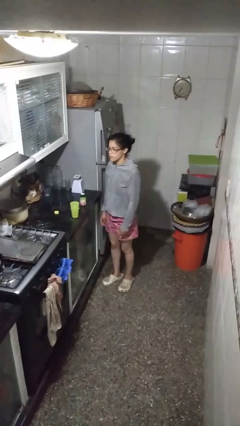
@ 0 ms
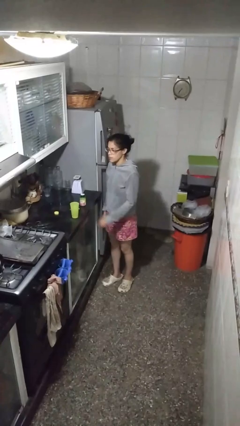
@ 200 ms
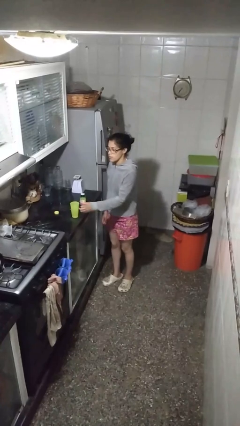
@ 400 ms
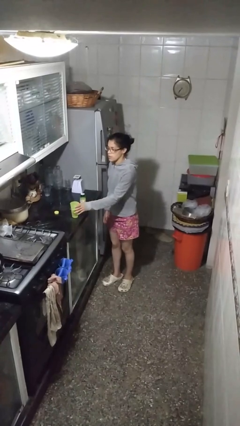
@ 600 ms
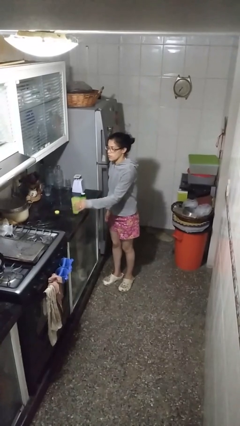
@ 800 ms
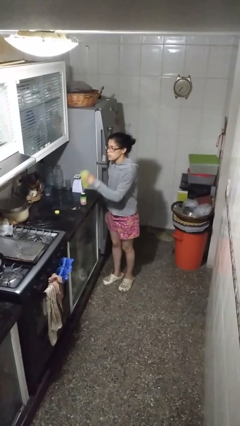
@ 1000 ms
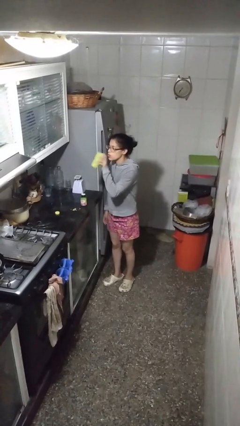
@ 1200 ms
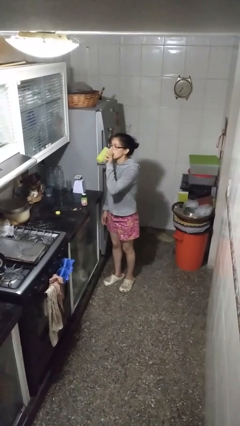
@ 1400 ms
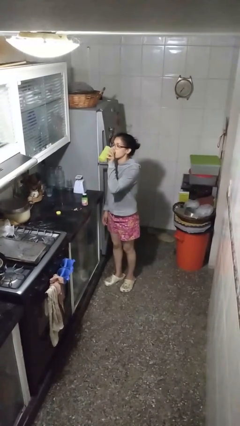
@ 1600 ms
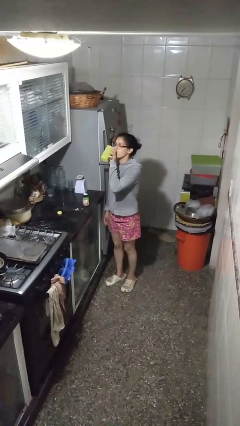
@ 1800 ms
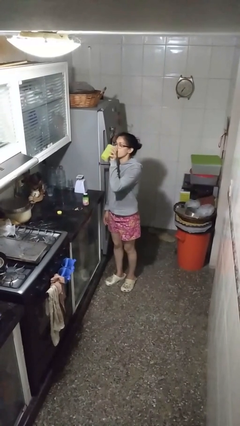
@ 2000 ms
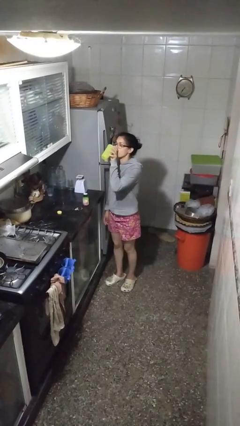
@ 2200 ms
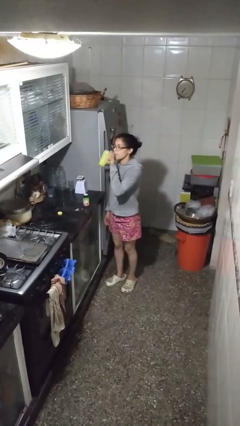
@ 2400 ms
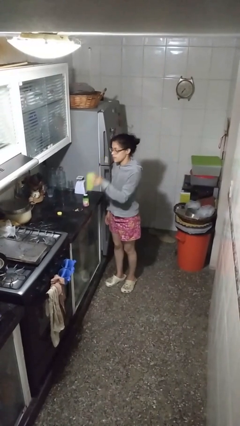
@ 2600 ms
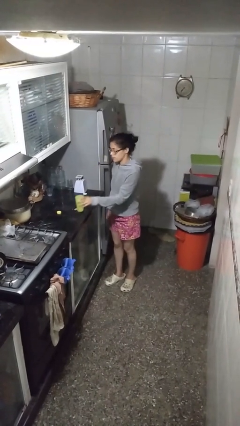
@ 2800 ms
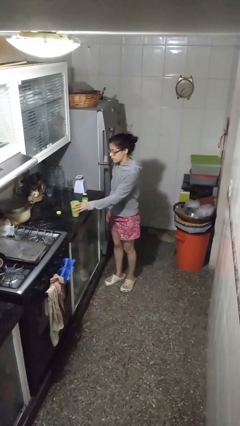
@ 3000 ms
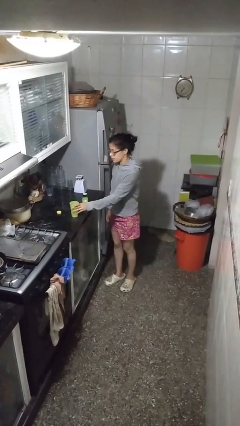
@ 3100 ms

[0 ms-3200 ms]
person drinks from cup

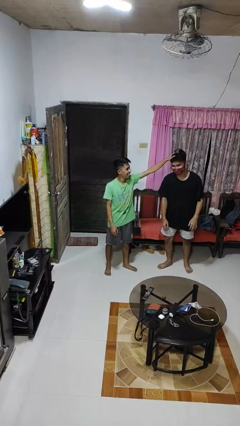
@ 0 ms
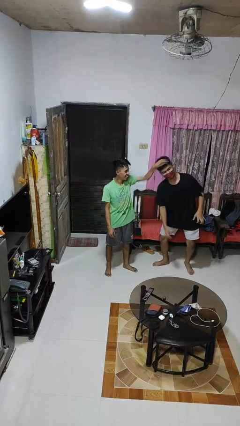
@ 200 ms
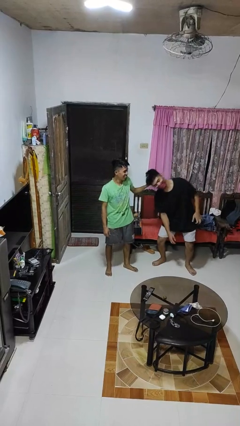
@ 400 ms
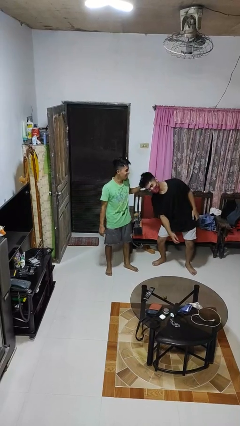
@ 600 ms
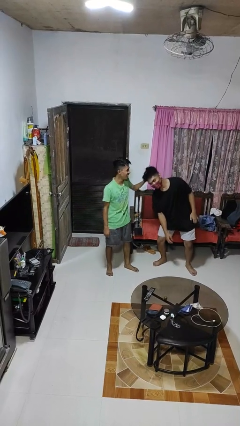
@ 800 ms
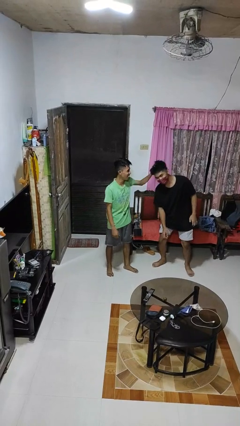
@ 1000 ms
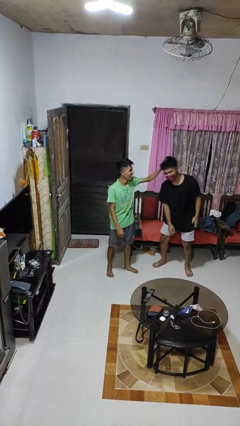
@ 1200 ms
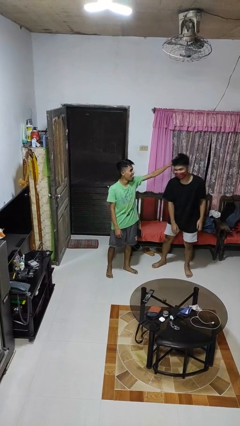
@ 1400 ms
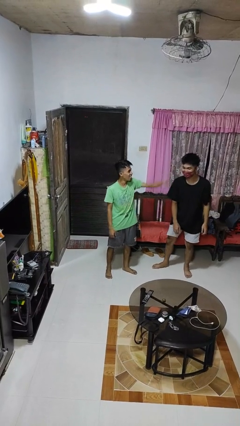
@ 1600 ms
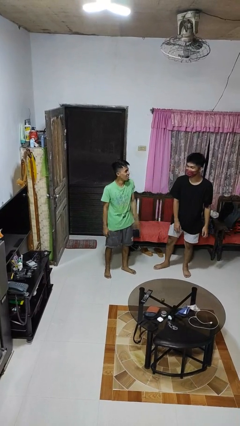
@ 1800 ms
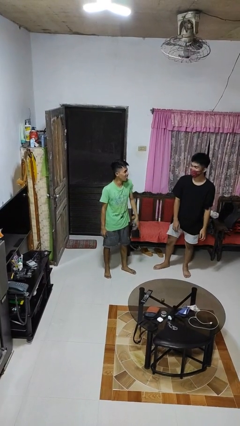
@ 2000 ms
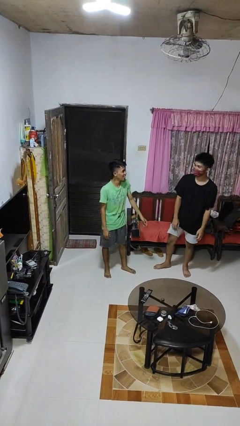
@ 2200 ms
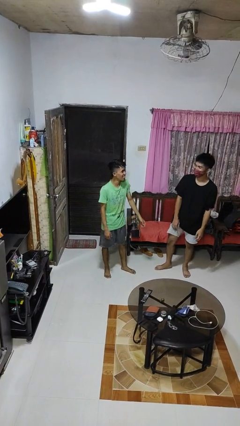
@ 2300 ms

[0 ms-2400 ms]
person grabs person by hair

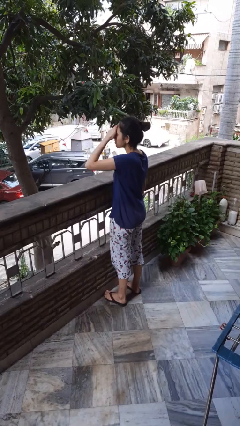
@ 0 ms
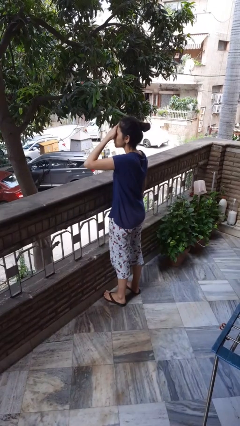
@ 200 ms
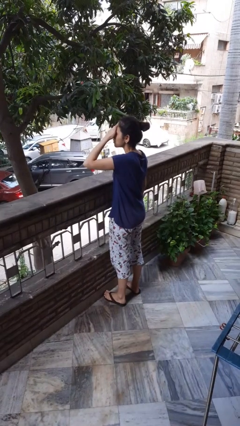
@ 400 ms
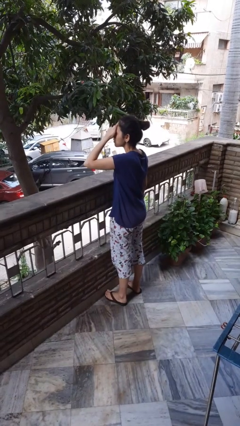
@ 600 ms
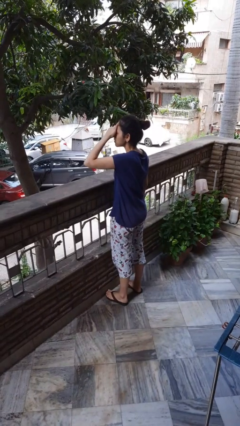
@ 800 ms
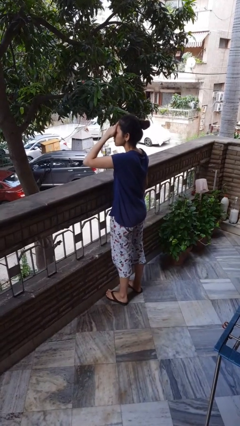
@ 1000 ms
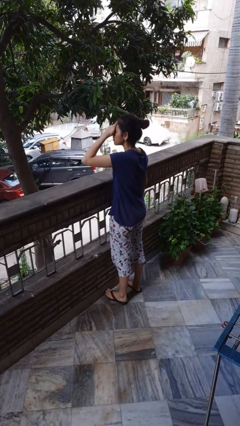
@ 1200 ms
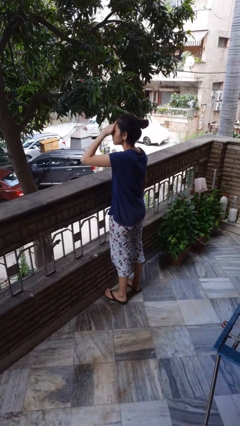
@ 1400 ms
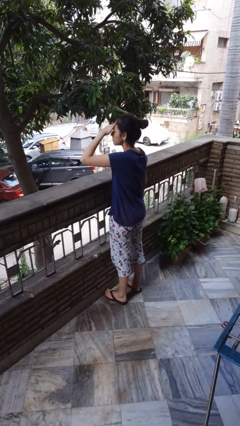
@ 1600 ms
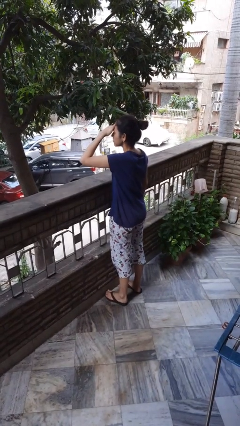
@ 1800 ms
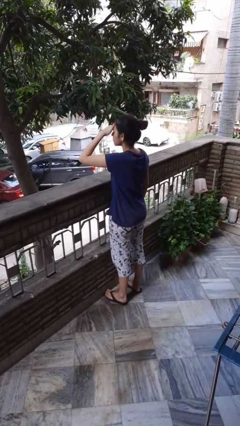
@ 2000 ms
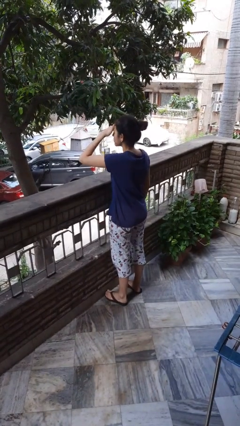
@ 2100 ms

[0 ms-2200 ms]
person shades eyes

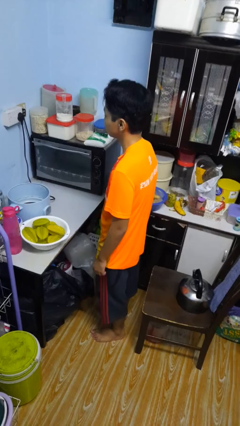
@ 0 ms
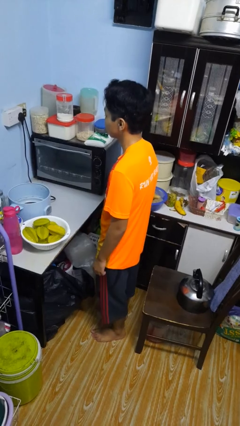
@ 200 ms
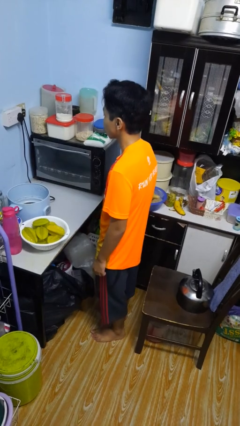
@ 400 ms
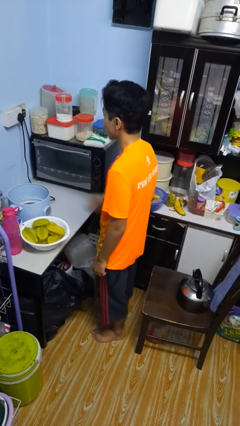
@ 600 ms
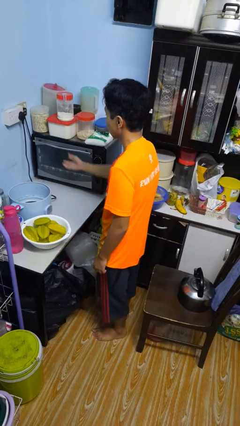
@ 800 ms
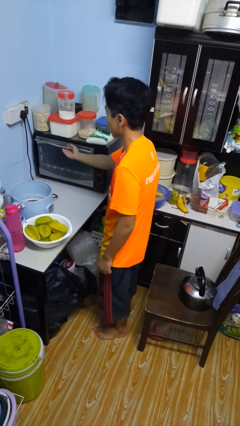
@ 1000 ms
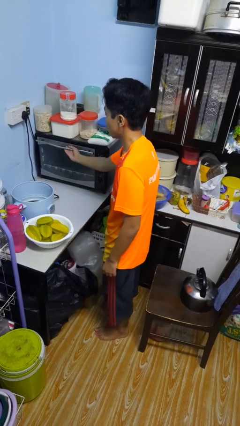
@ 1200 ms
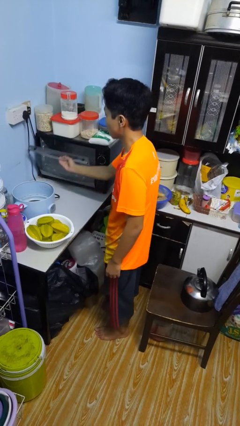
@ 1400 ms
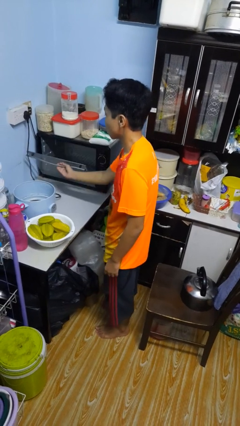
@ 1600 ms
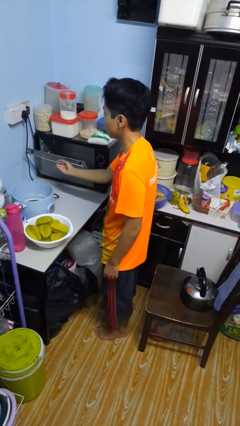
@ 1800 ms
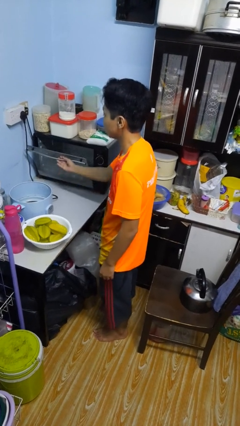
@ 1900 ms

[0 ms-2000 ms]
person opens microwave

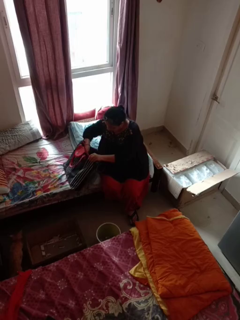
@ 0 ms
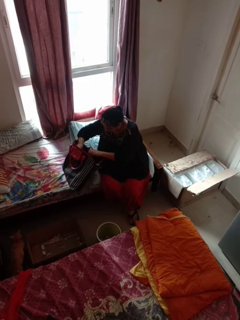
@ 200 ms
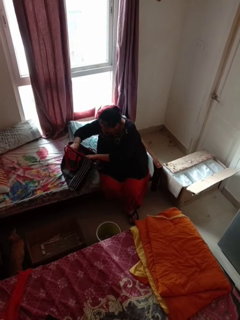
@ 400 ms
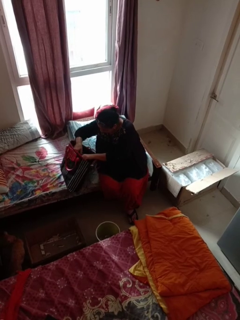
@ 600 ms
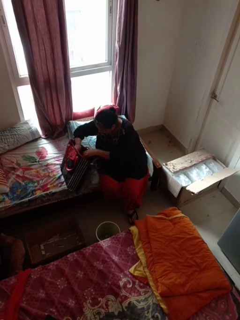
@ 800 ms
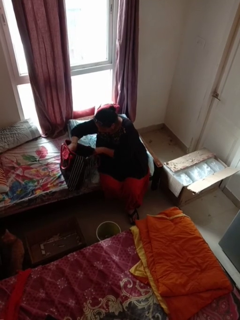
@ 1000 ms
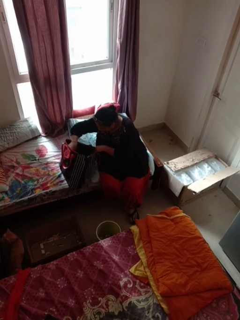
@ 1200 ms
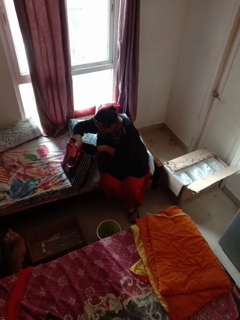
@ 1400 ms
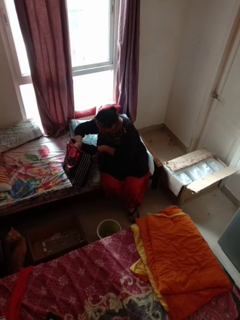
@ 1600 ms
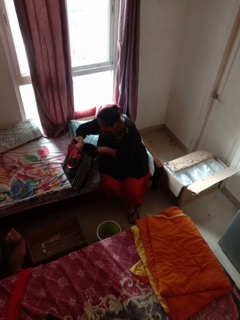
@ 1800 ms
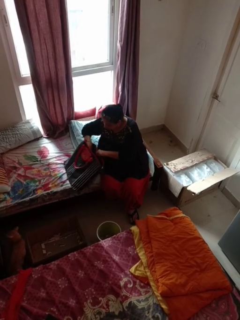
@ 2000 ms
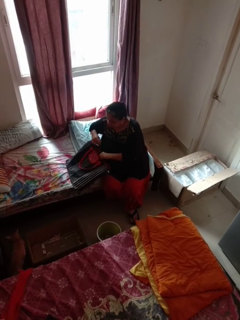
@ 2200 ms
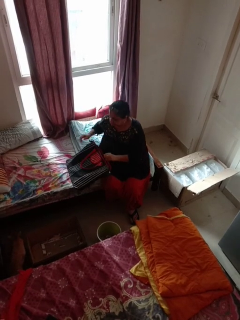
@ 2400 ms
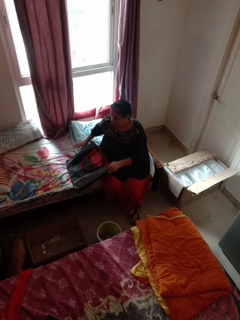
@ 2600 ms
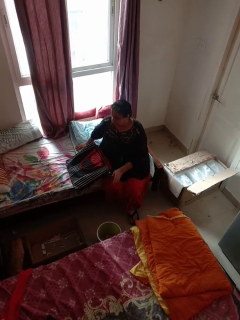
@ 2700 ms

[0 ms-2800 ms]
person searches in bag

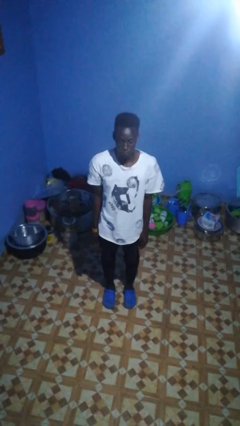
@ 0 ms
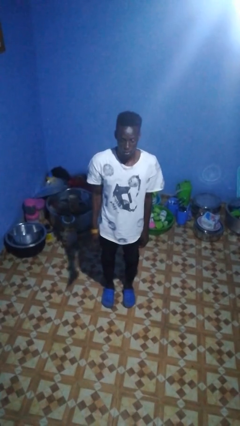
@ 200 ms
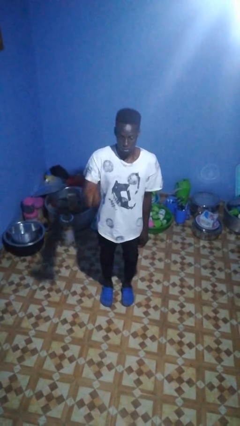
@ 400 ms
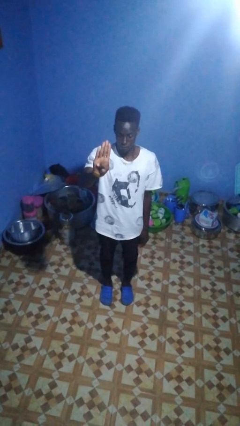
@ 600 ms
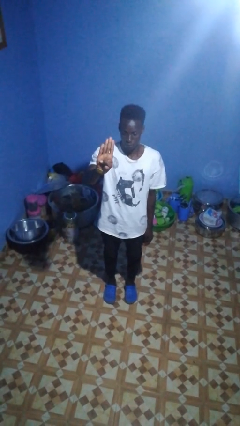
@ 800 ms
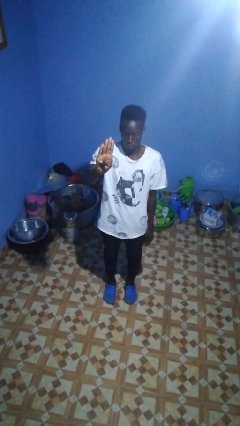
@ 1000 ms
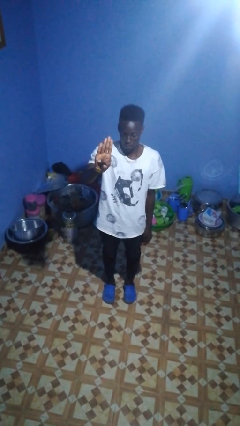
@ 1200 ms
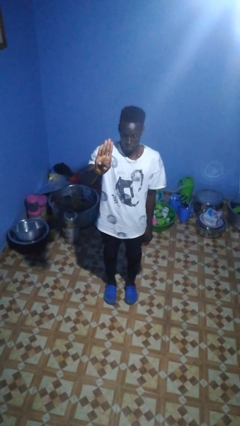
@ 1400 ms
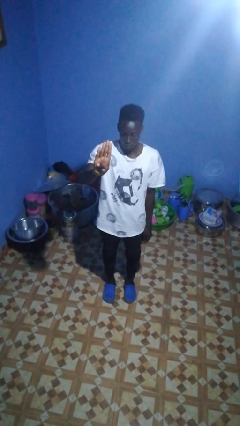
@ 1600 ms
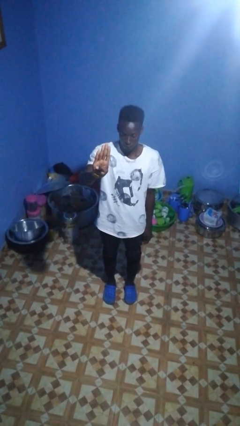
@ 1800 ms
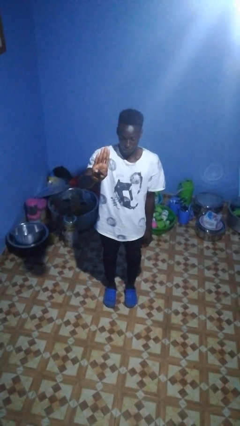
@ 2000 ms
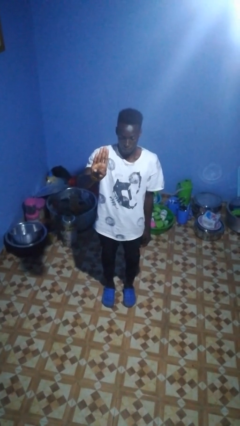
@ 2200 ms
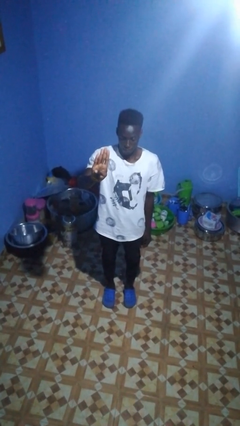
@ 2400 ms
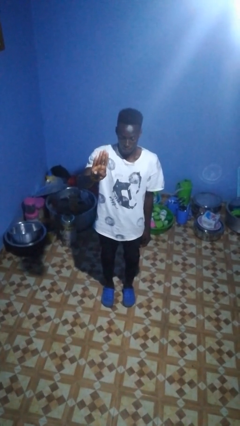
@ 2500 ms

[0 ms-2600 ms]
person gestures number four

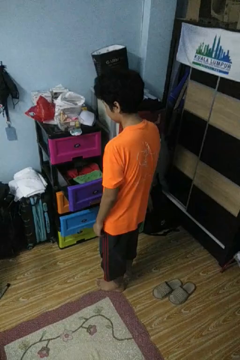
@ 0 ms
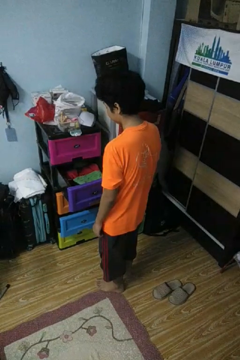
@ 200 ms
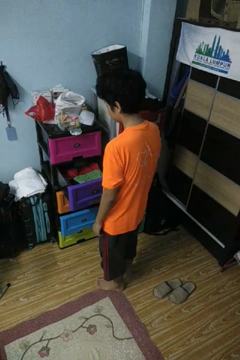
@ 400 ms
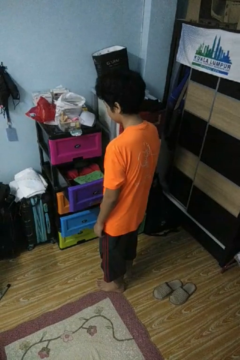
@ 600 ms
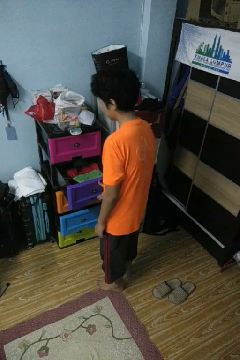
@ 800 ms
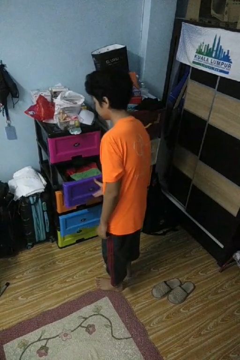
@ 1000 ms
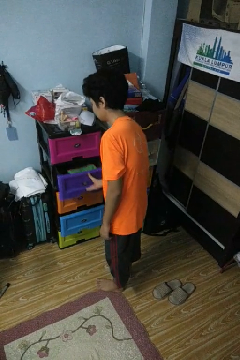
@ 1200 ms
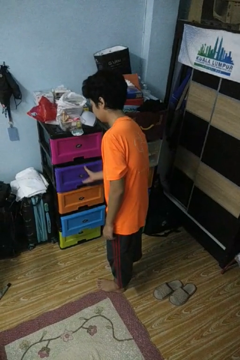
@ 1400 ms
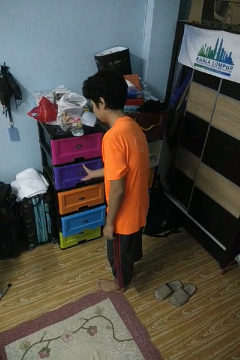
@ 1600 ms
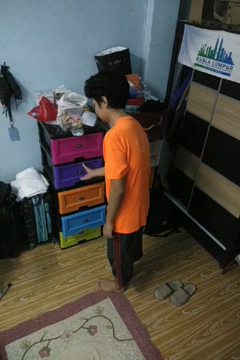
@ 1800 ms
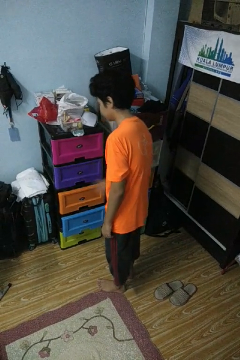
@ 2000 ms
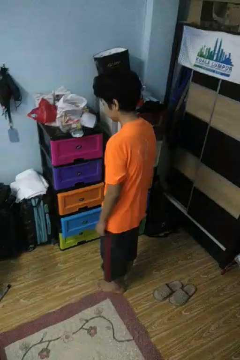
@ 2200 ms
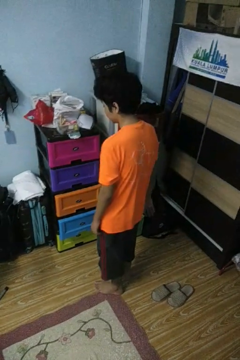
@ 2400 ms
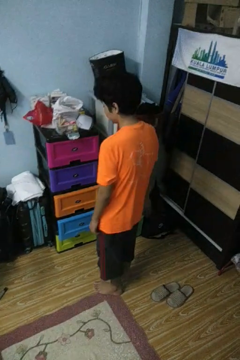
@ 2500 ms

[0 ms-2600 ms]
person closes dresser drawer

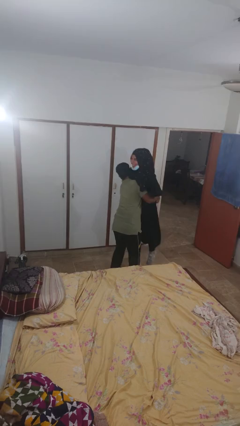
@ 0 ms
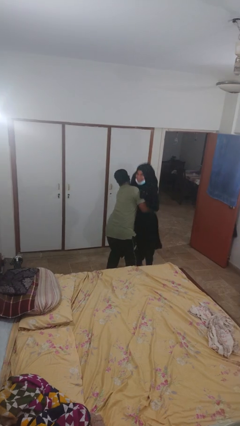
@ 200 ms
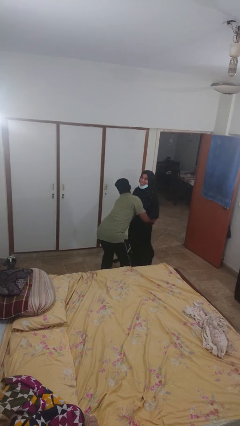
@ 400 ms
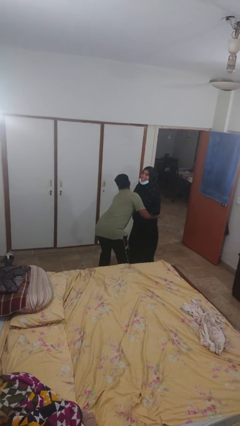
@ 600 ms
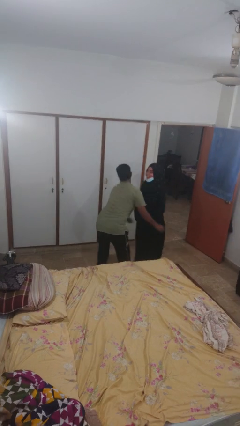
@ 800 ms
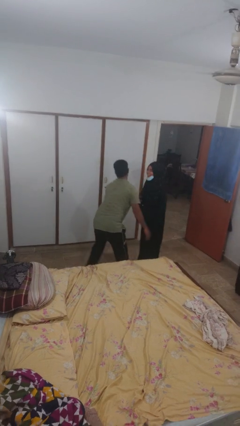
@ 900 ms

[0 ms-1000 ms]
person puts down person
